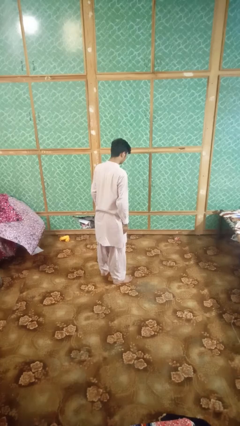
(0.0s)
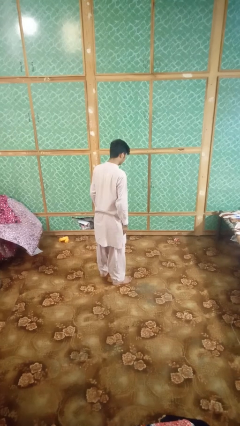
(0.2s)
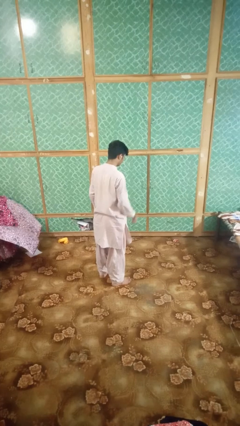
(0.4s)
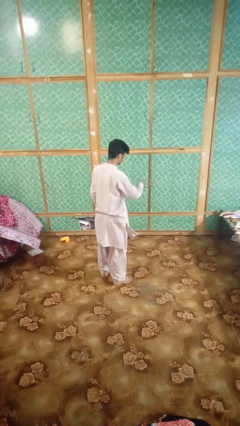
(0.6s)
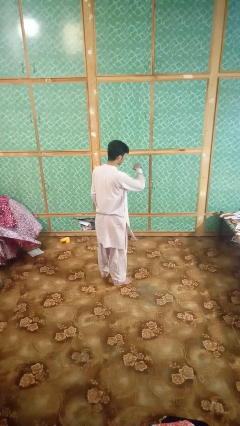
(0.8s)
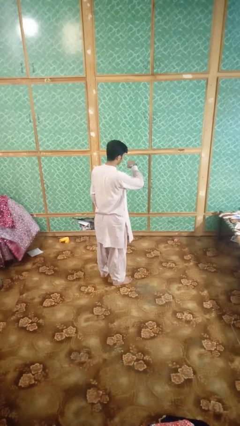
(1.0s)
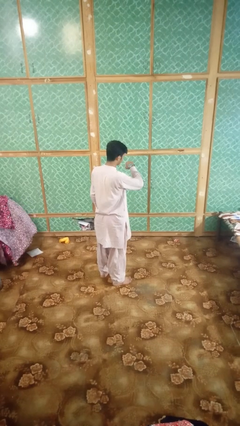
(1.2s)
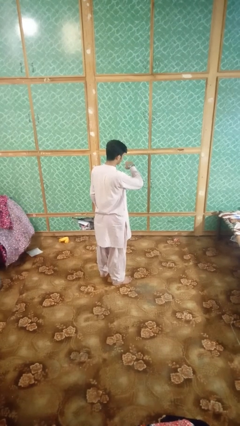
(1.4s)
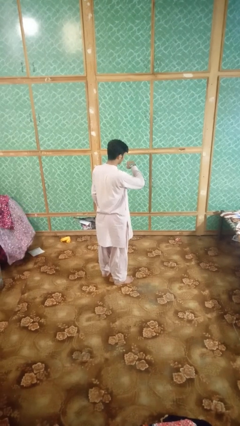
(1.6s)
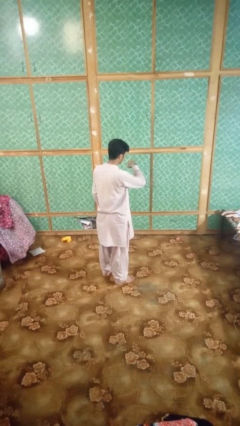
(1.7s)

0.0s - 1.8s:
person looks at wristwatch

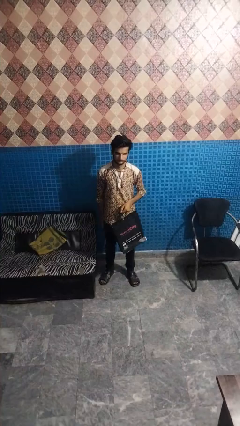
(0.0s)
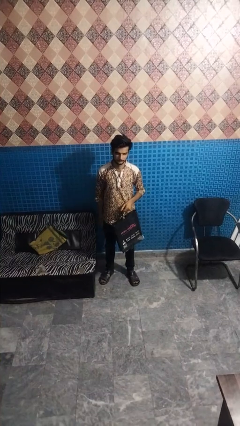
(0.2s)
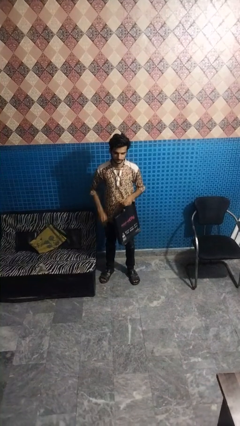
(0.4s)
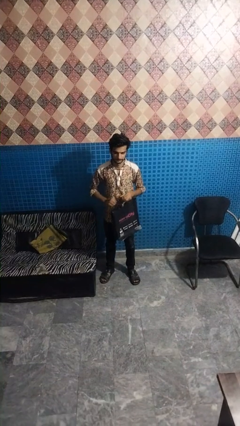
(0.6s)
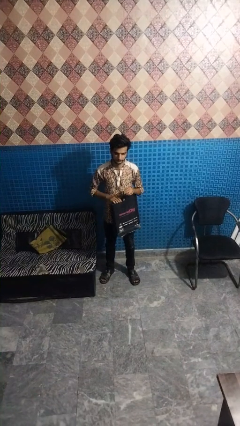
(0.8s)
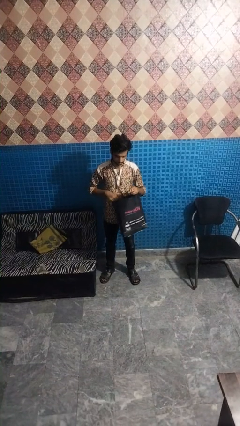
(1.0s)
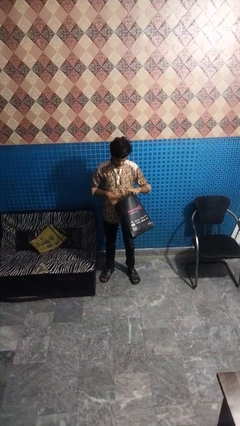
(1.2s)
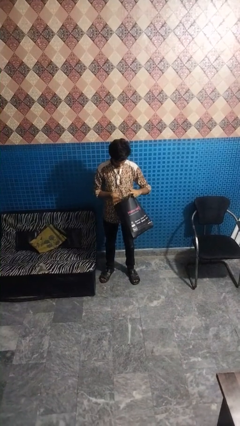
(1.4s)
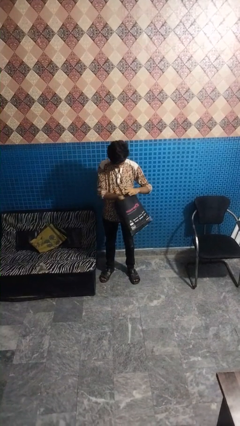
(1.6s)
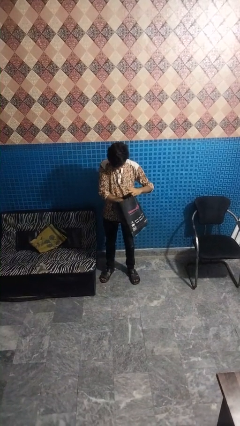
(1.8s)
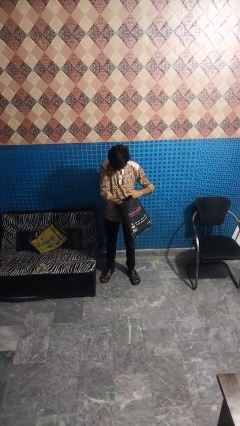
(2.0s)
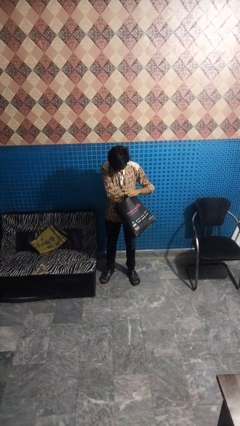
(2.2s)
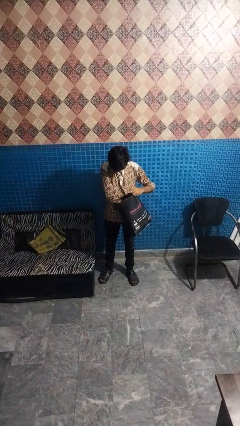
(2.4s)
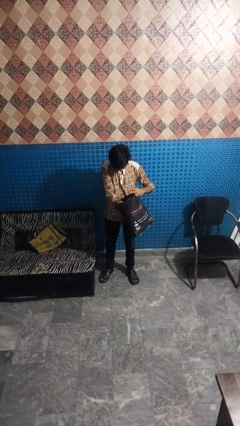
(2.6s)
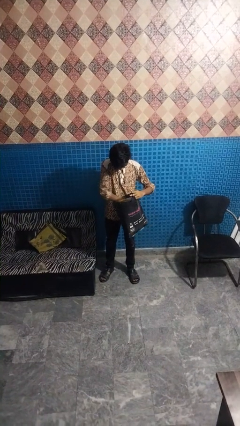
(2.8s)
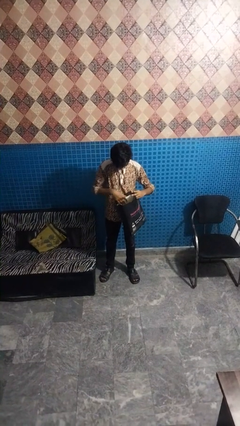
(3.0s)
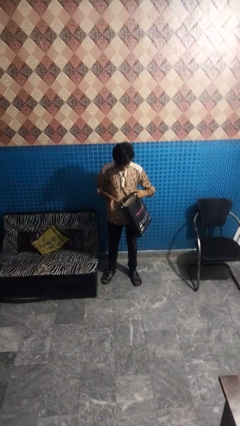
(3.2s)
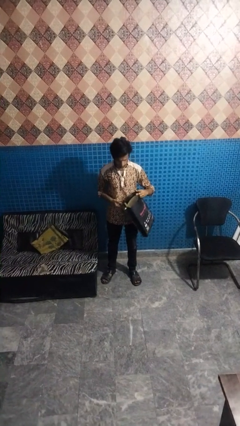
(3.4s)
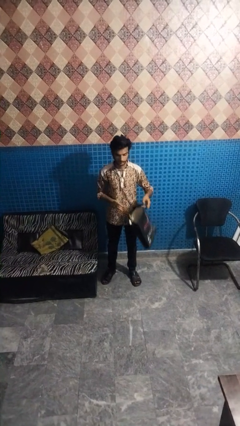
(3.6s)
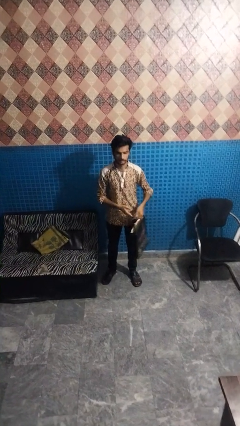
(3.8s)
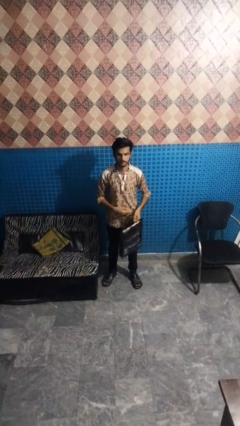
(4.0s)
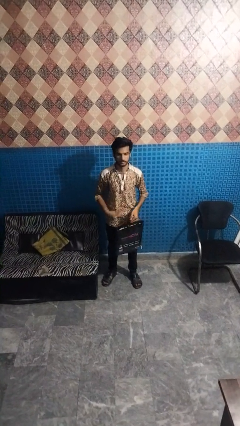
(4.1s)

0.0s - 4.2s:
person searches in bag

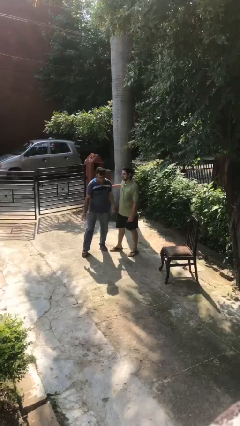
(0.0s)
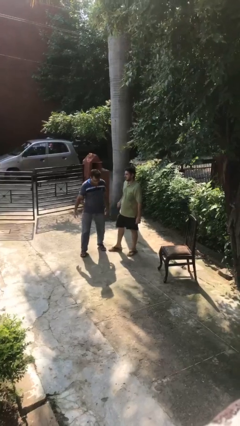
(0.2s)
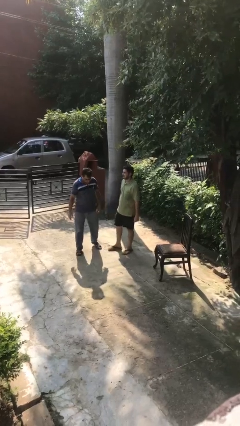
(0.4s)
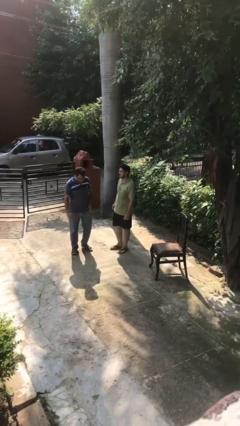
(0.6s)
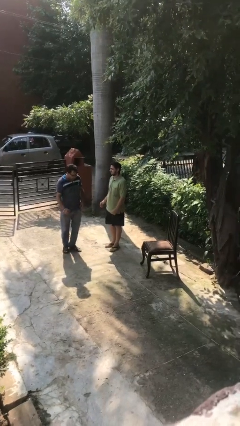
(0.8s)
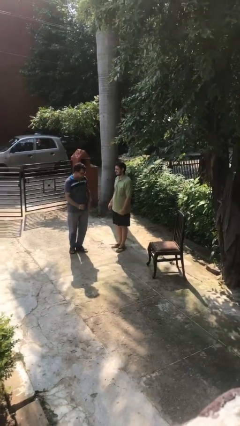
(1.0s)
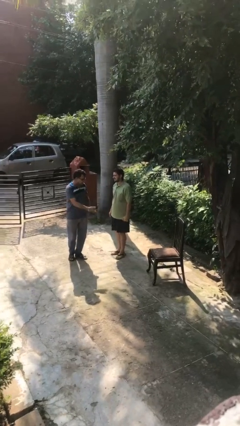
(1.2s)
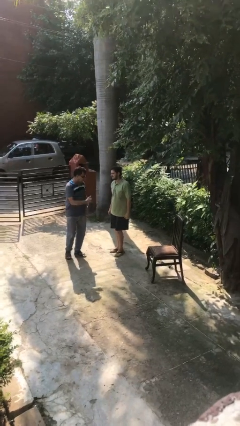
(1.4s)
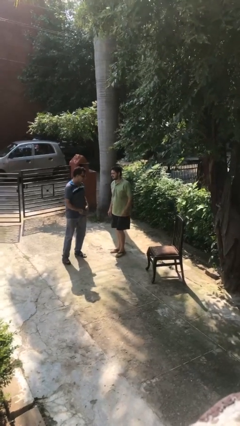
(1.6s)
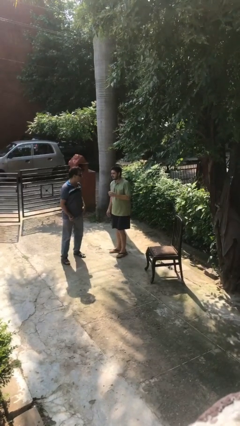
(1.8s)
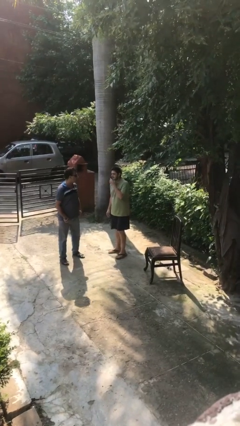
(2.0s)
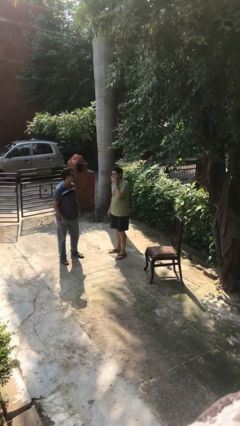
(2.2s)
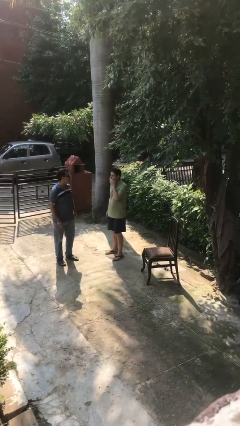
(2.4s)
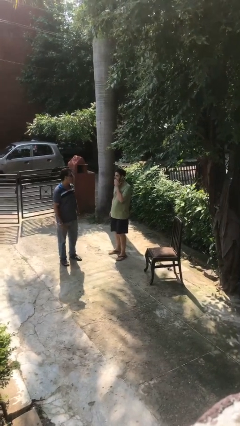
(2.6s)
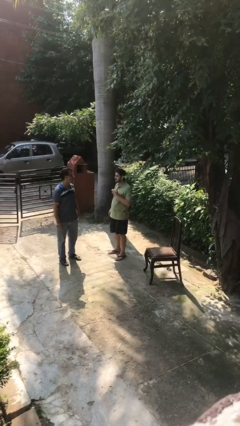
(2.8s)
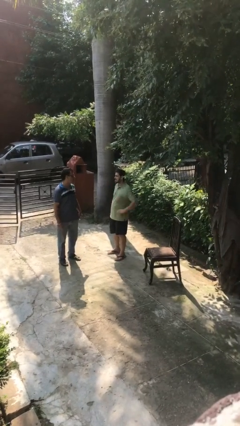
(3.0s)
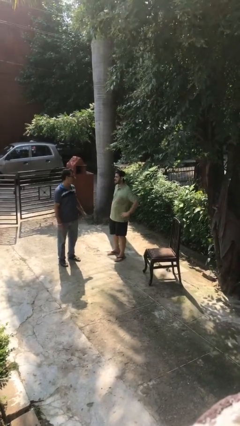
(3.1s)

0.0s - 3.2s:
person talks to person

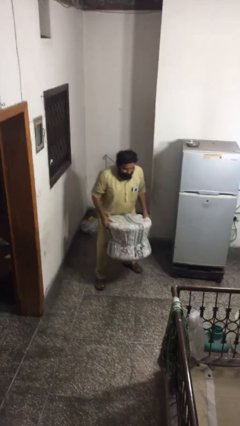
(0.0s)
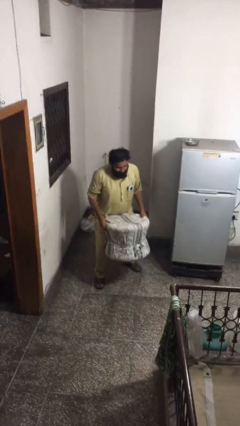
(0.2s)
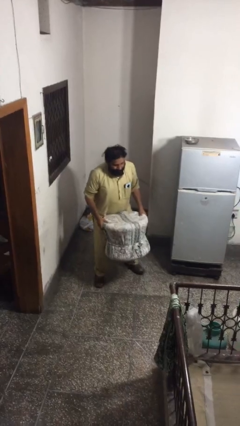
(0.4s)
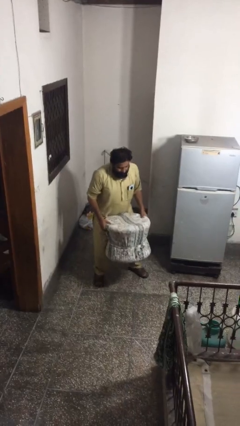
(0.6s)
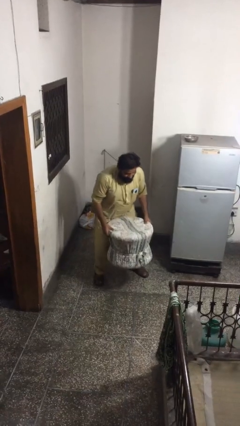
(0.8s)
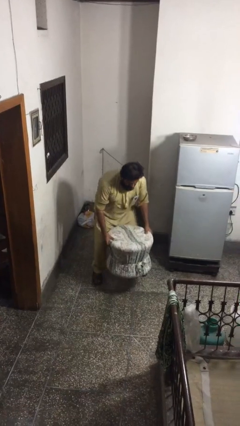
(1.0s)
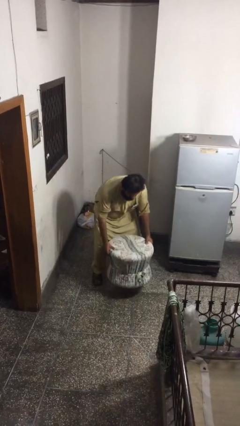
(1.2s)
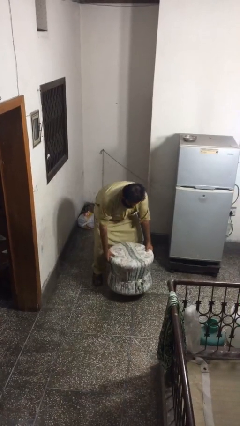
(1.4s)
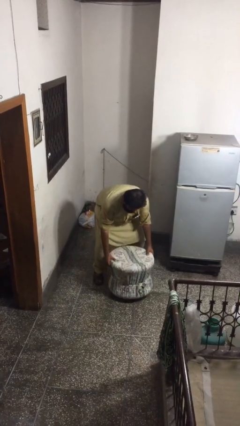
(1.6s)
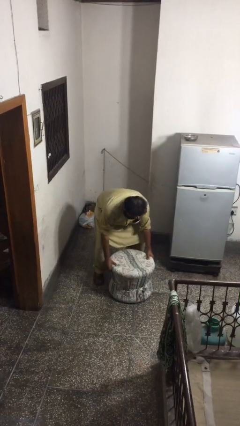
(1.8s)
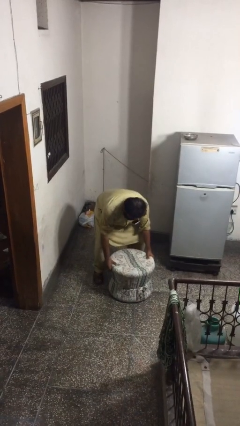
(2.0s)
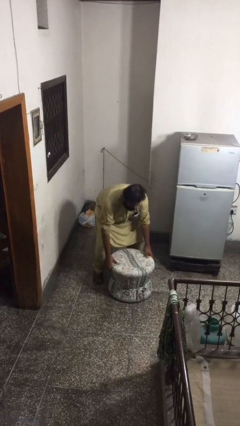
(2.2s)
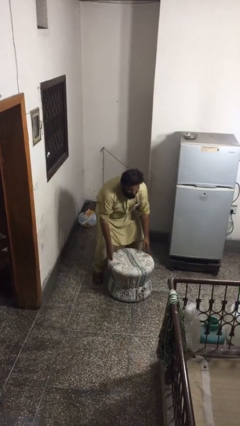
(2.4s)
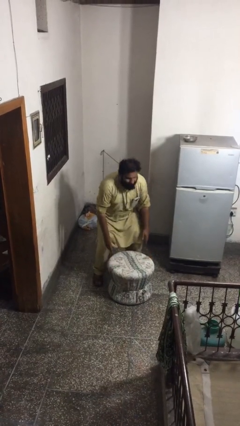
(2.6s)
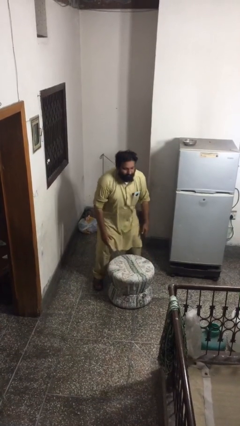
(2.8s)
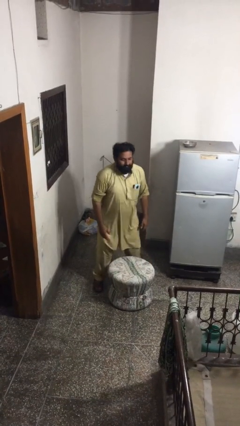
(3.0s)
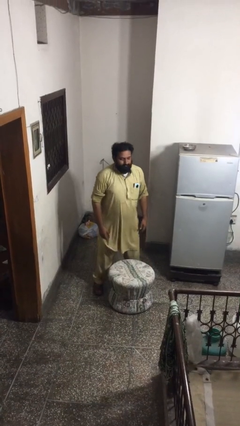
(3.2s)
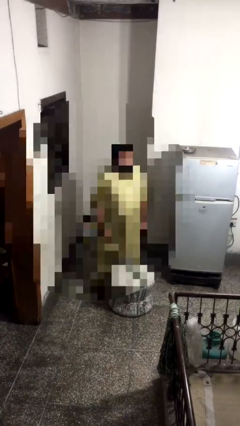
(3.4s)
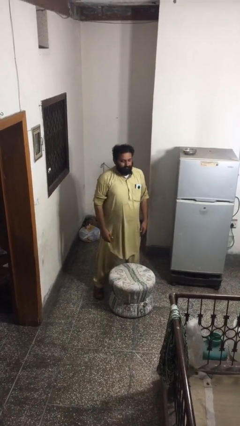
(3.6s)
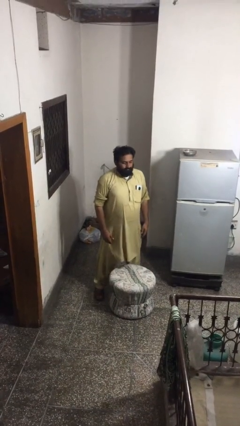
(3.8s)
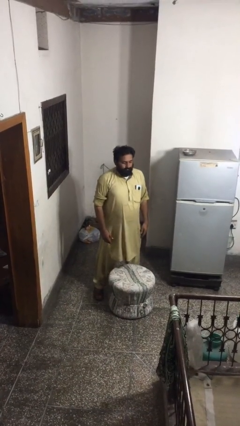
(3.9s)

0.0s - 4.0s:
person puts down object on floor

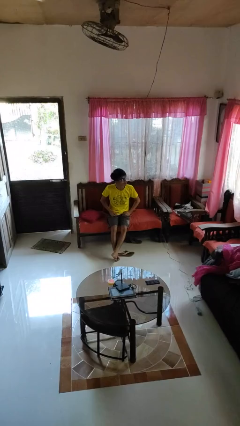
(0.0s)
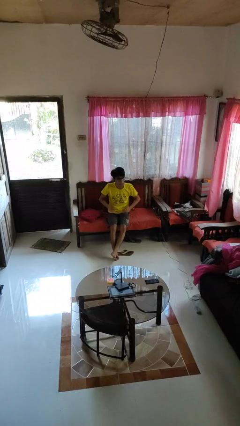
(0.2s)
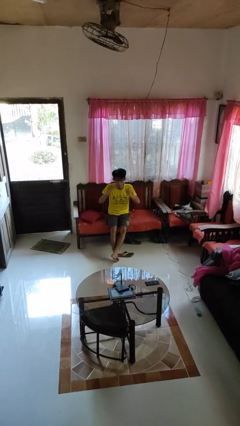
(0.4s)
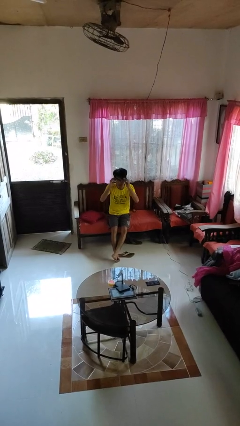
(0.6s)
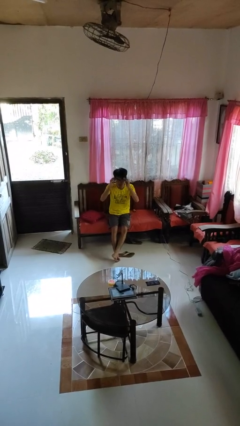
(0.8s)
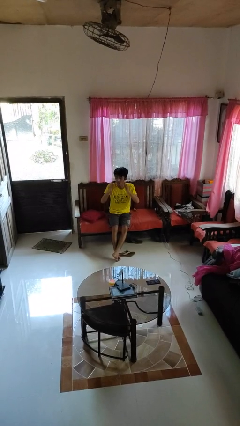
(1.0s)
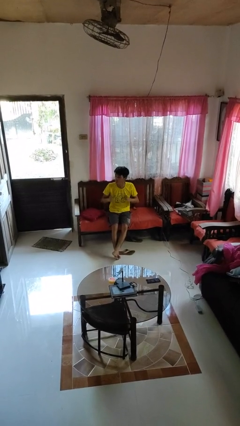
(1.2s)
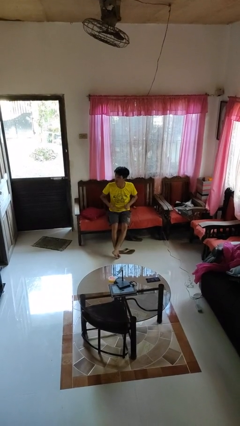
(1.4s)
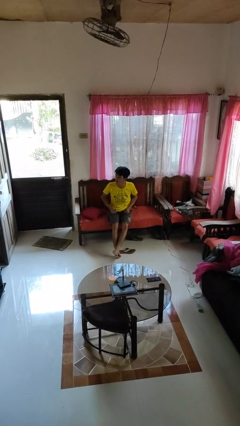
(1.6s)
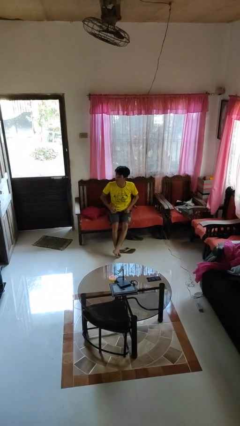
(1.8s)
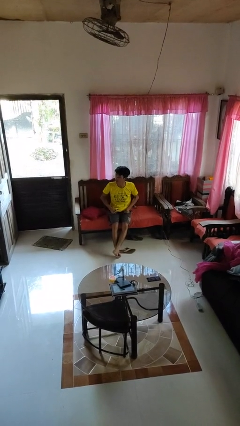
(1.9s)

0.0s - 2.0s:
person takes off glasses

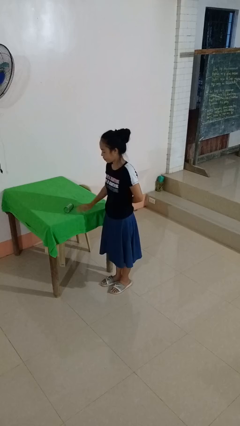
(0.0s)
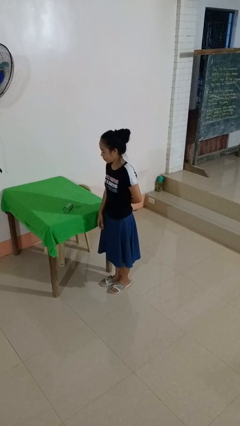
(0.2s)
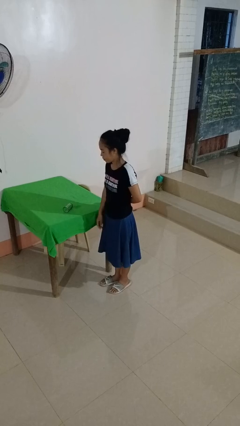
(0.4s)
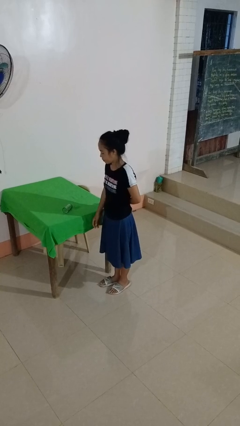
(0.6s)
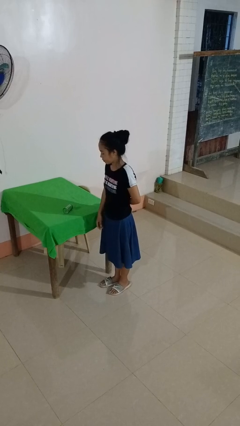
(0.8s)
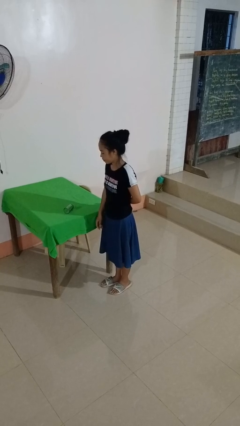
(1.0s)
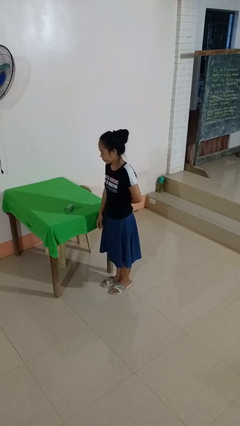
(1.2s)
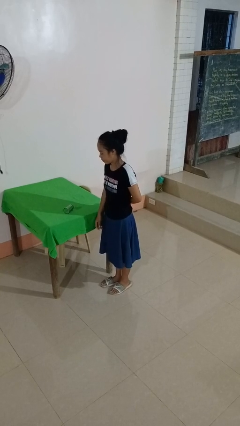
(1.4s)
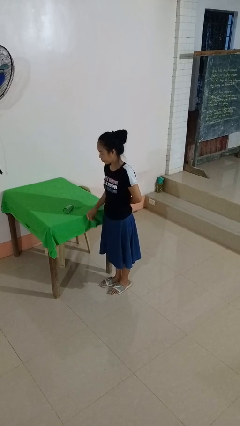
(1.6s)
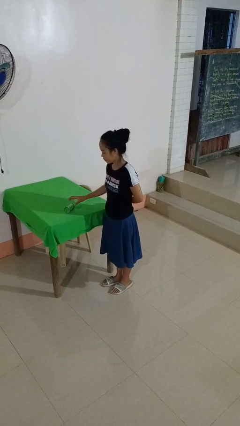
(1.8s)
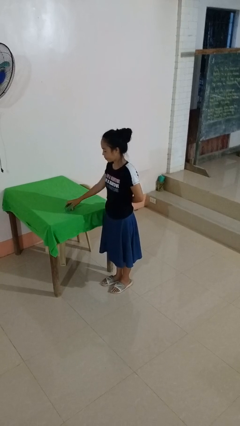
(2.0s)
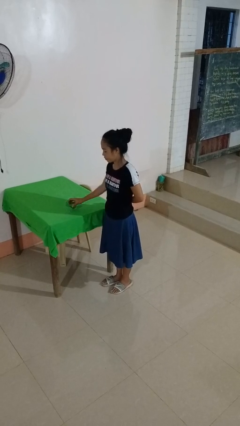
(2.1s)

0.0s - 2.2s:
person knocks over glass
